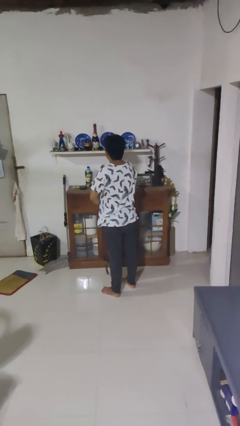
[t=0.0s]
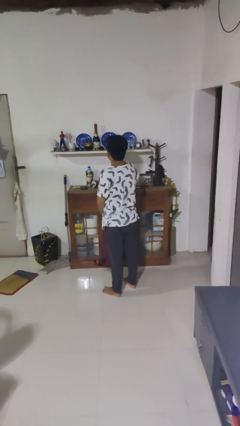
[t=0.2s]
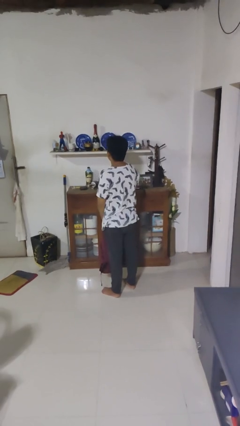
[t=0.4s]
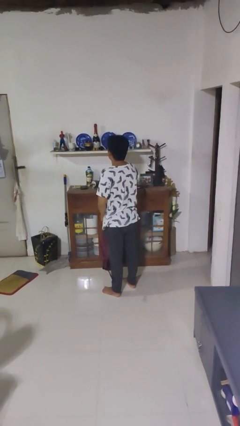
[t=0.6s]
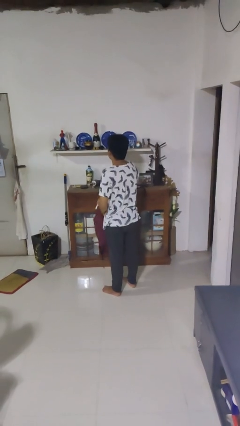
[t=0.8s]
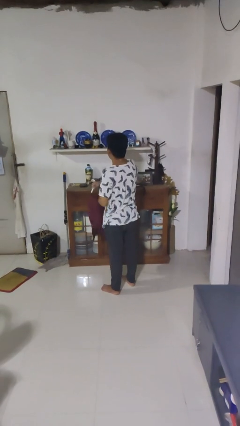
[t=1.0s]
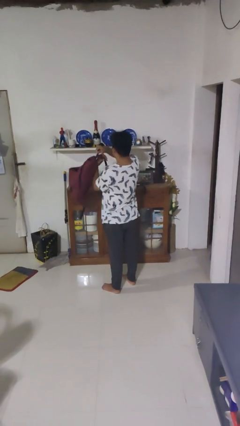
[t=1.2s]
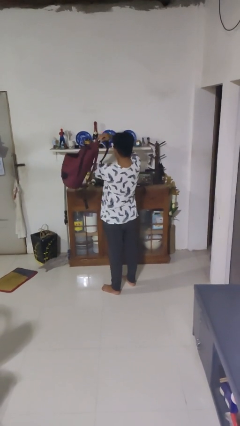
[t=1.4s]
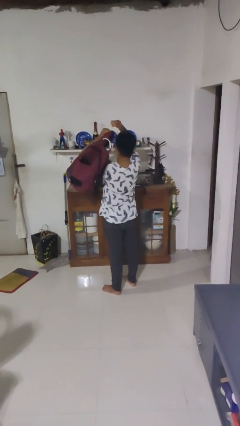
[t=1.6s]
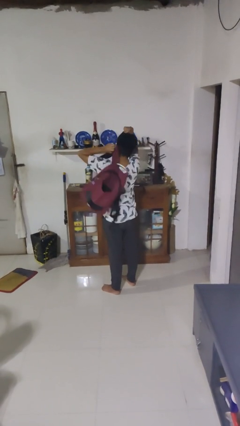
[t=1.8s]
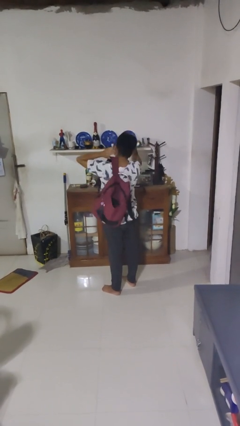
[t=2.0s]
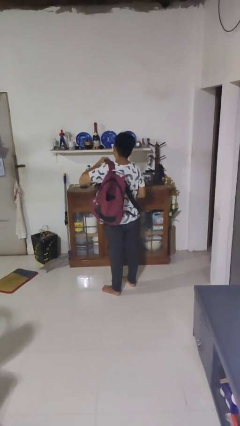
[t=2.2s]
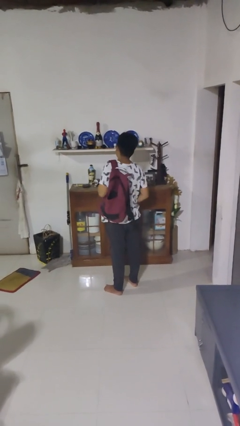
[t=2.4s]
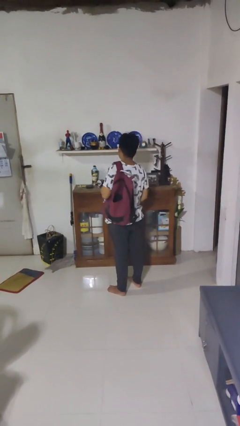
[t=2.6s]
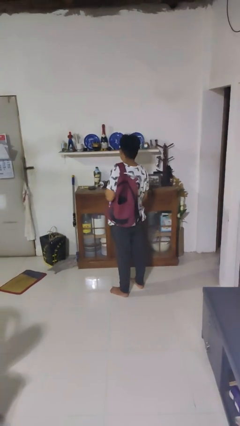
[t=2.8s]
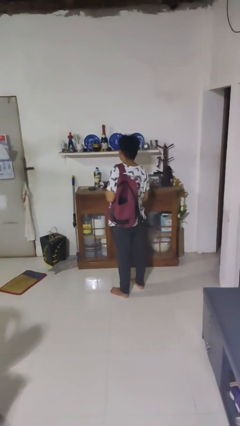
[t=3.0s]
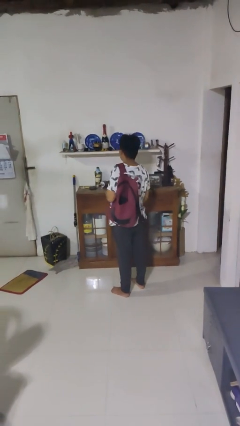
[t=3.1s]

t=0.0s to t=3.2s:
person puts on backpack

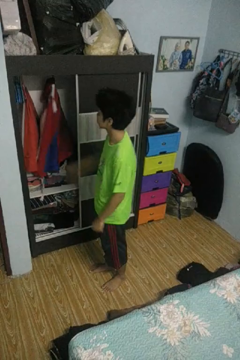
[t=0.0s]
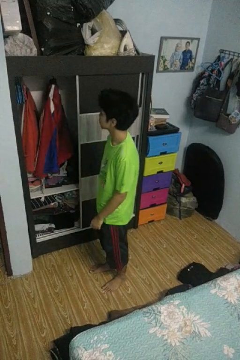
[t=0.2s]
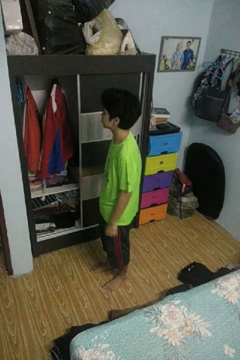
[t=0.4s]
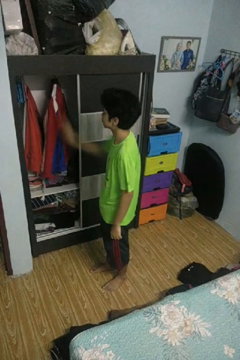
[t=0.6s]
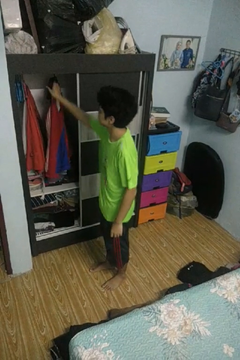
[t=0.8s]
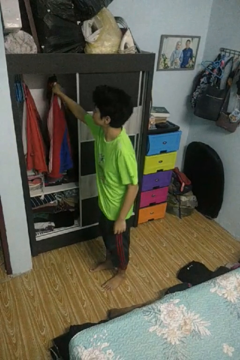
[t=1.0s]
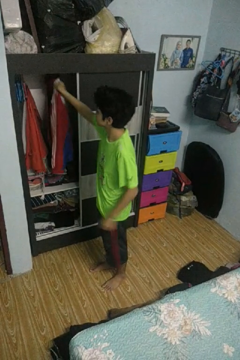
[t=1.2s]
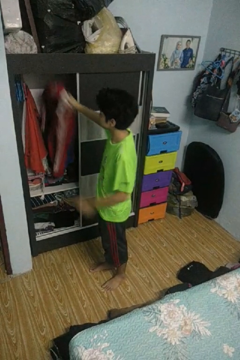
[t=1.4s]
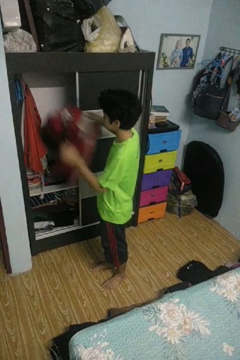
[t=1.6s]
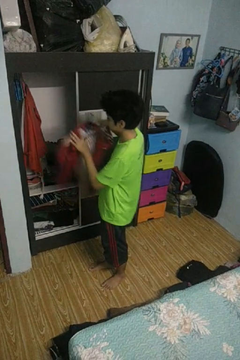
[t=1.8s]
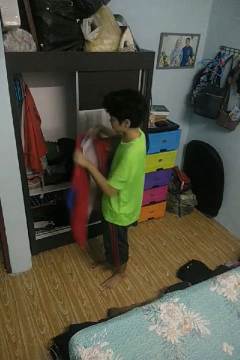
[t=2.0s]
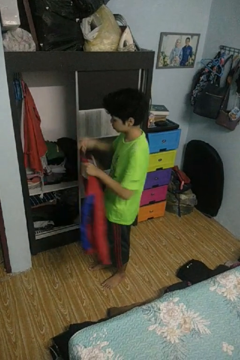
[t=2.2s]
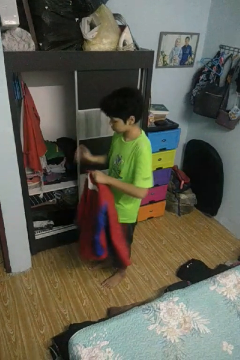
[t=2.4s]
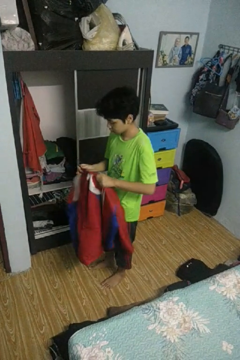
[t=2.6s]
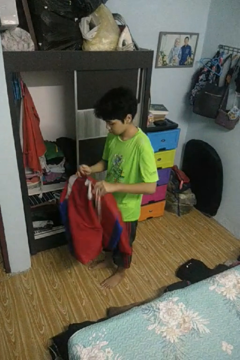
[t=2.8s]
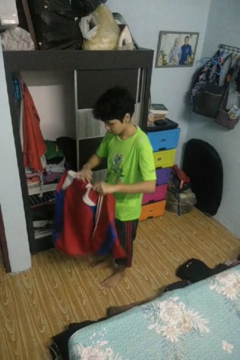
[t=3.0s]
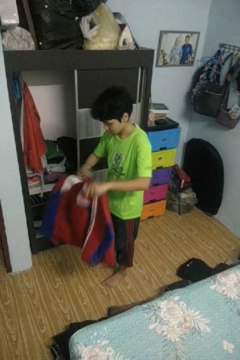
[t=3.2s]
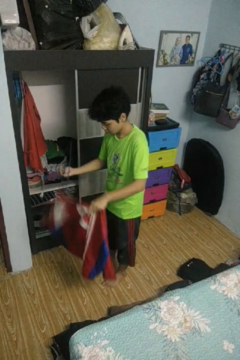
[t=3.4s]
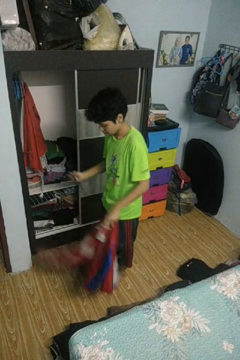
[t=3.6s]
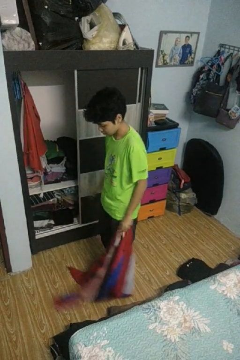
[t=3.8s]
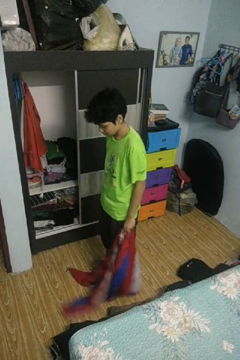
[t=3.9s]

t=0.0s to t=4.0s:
person takes clothes from closet

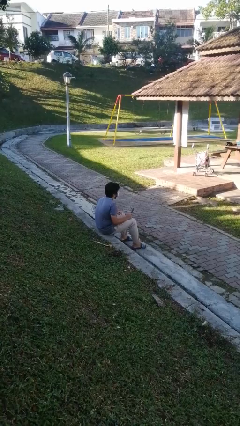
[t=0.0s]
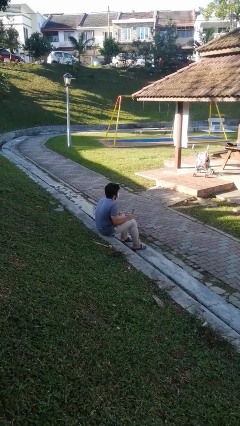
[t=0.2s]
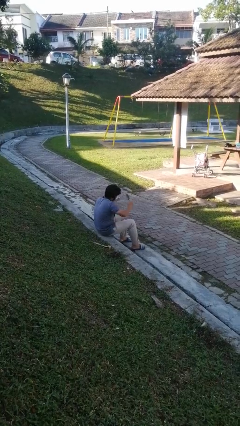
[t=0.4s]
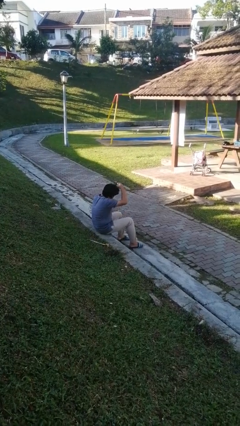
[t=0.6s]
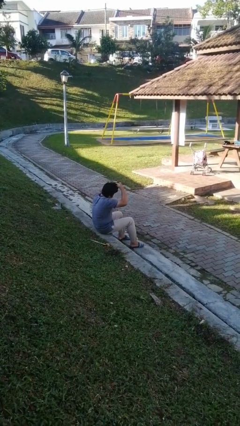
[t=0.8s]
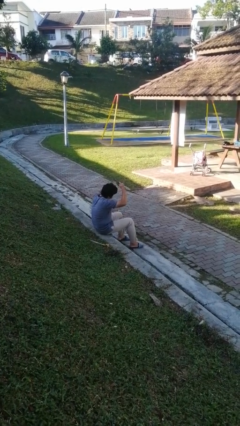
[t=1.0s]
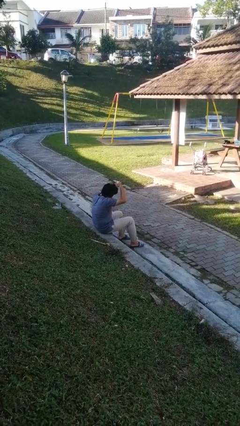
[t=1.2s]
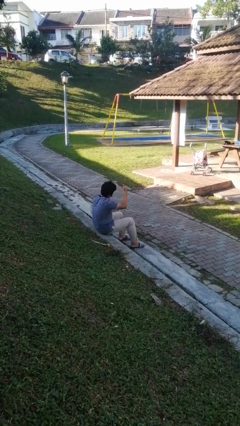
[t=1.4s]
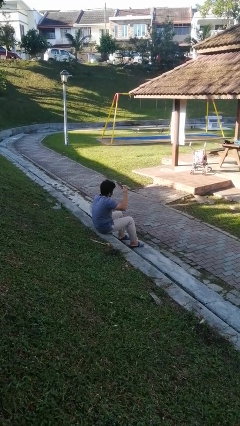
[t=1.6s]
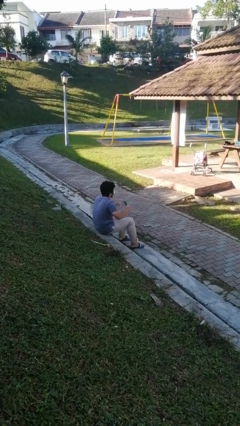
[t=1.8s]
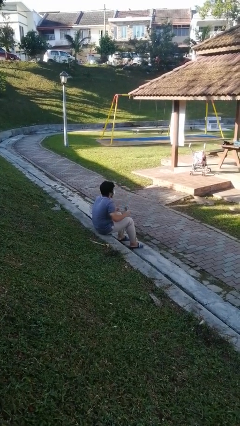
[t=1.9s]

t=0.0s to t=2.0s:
person brushes hair

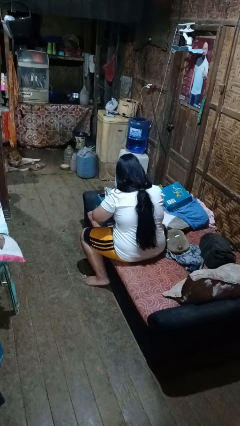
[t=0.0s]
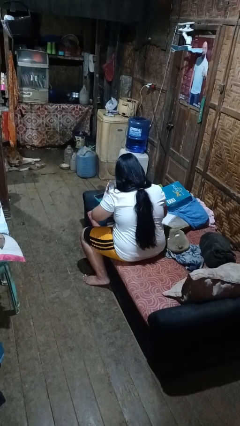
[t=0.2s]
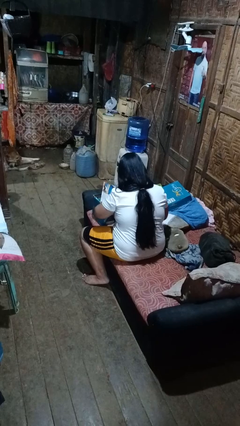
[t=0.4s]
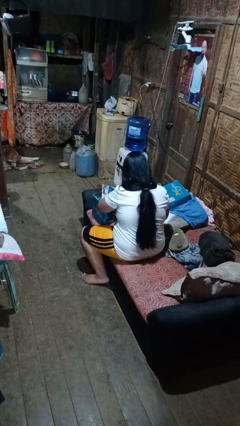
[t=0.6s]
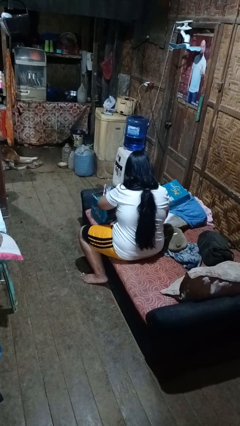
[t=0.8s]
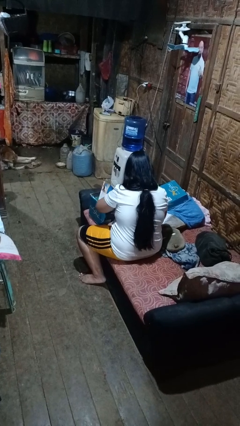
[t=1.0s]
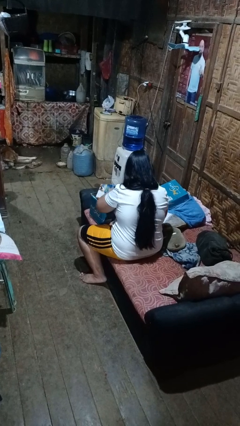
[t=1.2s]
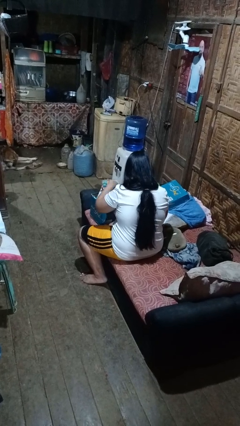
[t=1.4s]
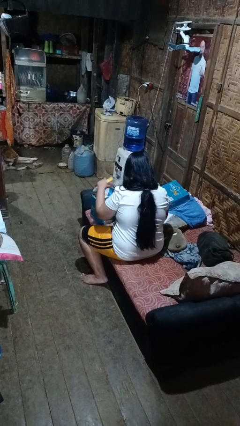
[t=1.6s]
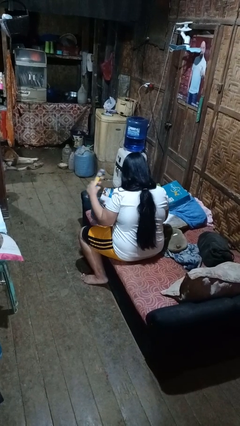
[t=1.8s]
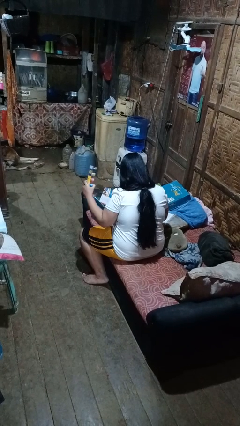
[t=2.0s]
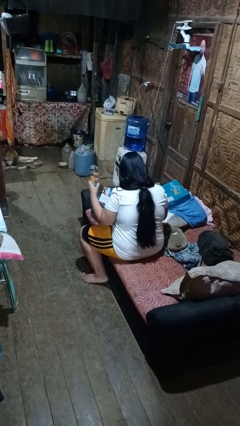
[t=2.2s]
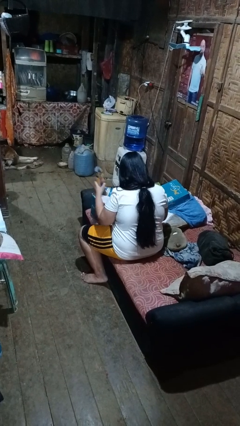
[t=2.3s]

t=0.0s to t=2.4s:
person searches in box

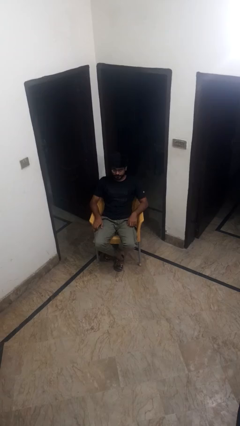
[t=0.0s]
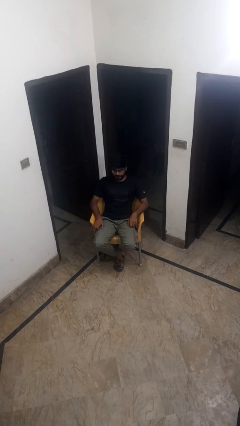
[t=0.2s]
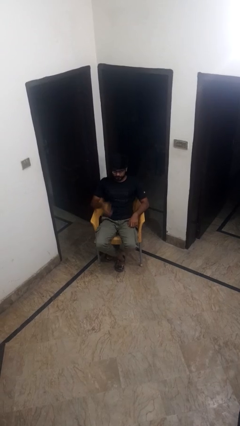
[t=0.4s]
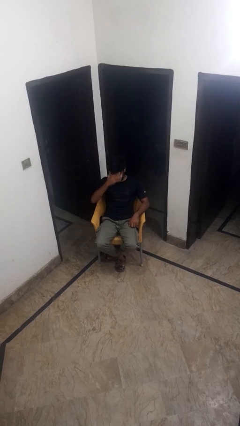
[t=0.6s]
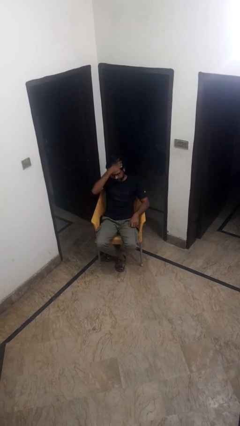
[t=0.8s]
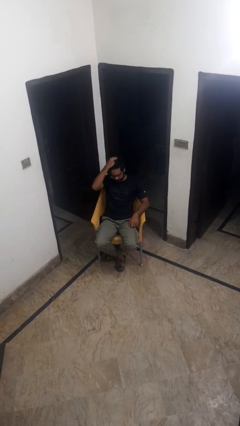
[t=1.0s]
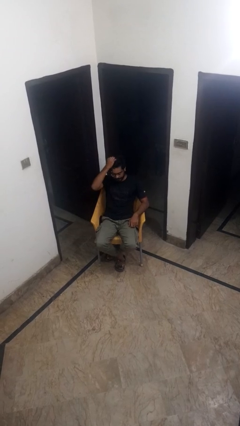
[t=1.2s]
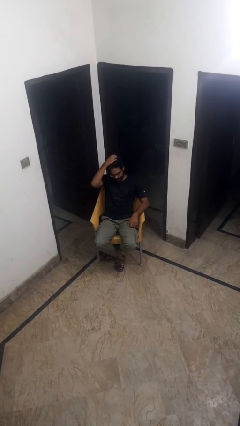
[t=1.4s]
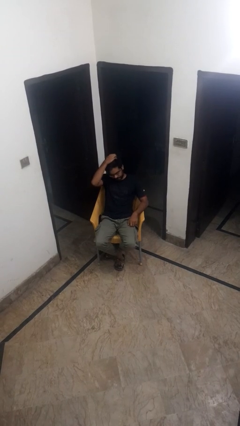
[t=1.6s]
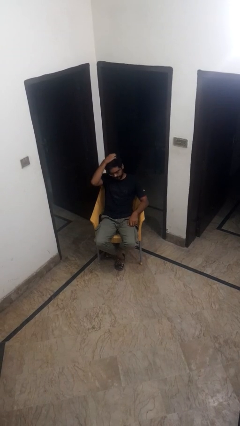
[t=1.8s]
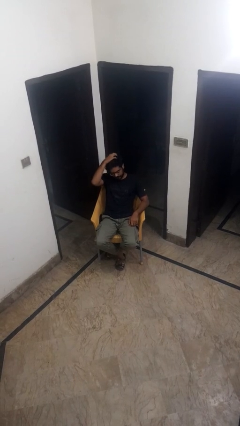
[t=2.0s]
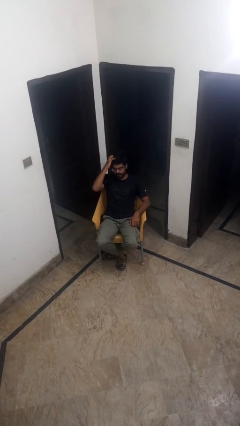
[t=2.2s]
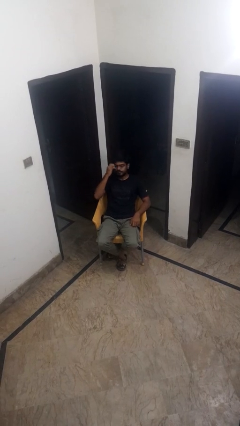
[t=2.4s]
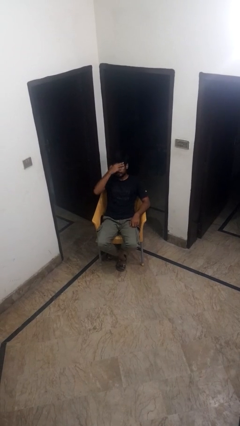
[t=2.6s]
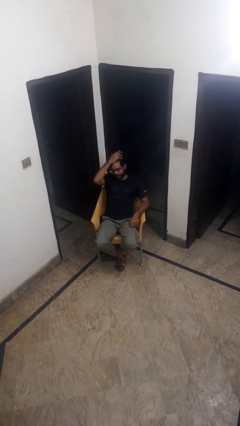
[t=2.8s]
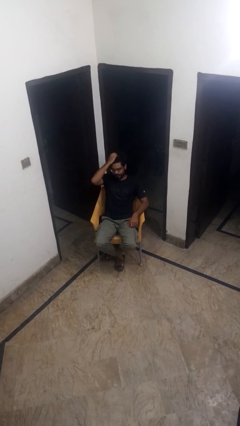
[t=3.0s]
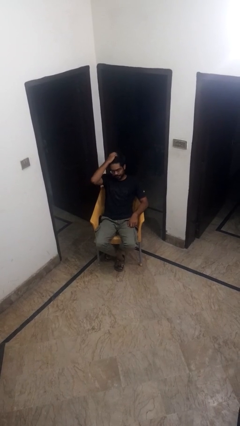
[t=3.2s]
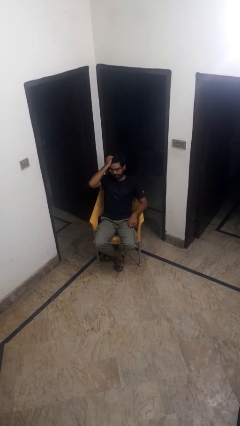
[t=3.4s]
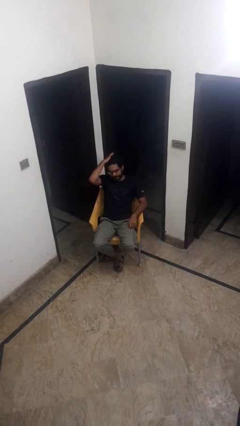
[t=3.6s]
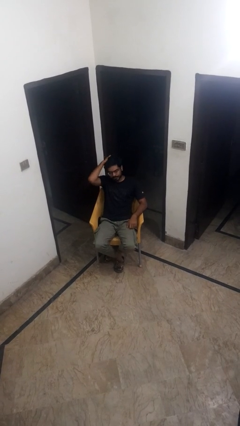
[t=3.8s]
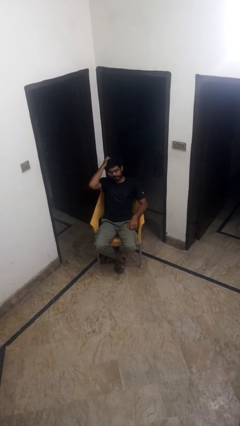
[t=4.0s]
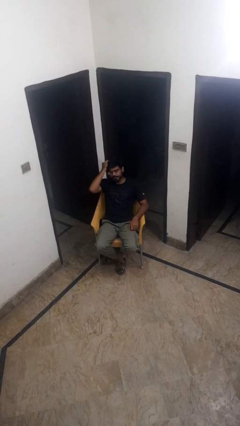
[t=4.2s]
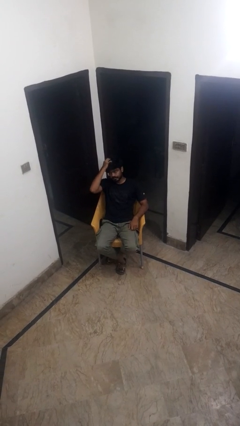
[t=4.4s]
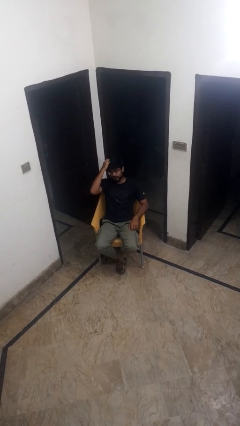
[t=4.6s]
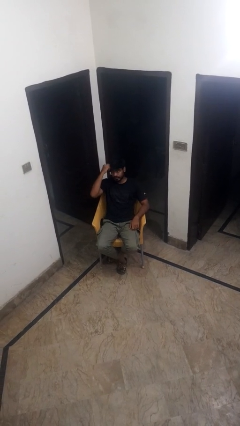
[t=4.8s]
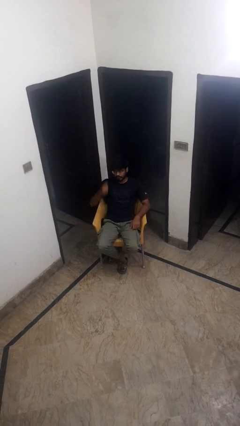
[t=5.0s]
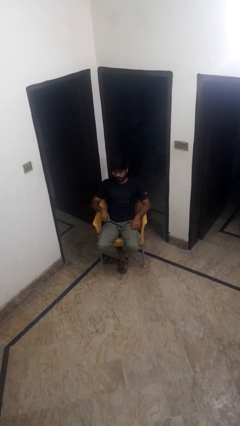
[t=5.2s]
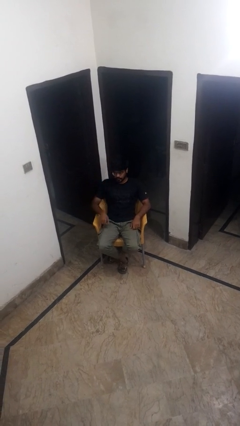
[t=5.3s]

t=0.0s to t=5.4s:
person scratches face

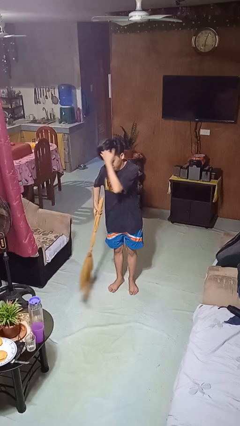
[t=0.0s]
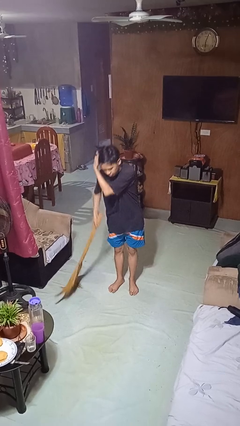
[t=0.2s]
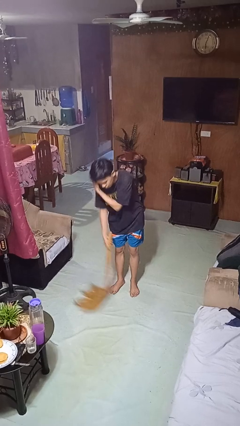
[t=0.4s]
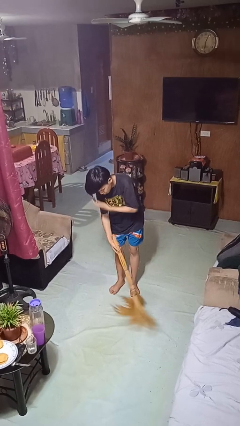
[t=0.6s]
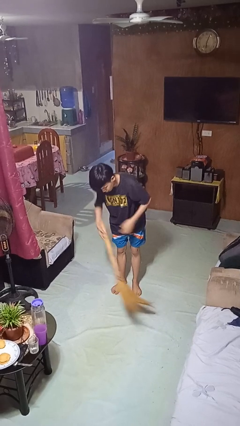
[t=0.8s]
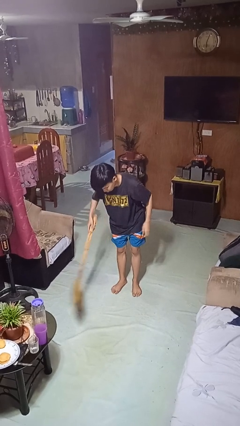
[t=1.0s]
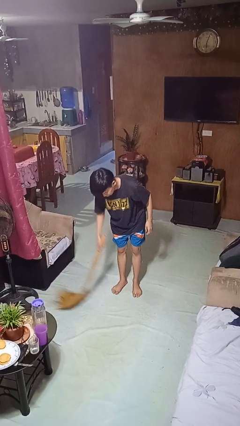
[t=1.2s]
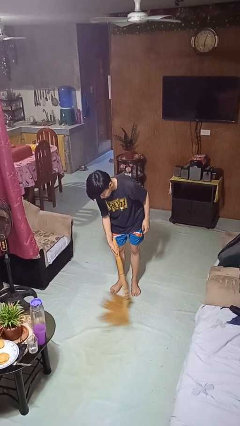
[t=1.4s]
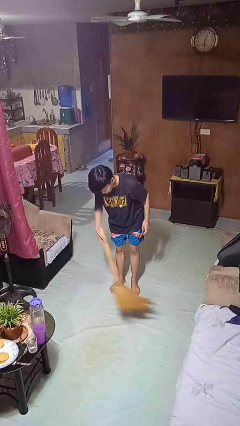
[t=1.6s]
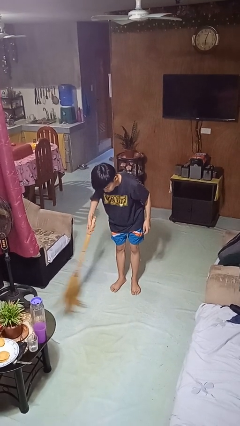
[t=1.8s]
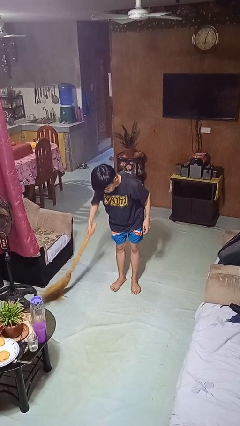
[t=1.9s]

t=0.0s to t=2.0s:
person sweeps floor
